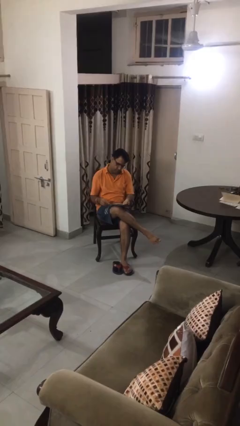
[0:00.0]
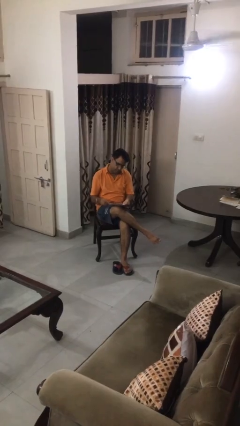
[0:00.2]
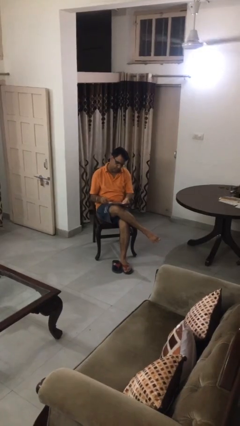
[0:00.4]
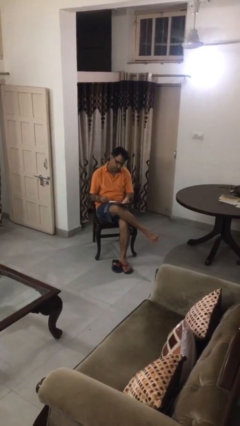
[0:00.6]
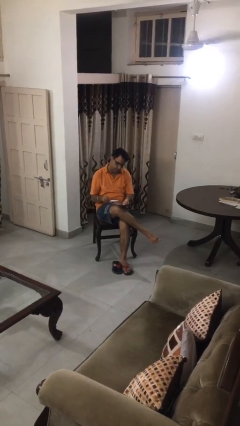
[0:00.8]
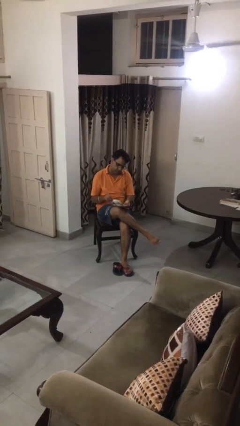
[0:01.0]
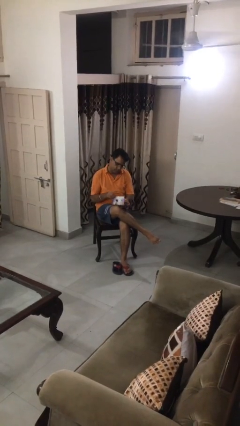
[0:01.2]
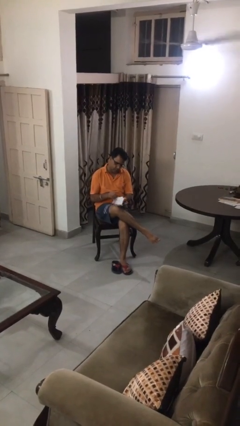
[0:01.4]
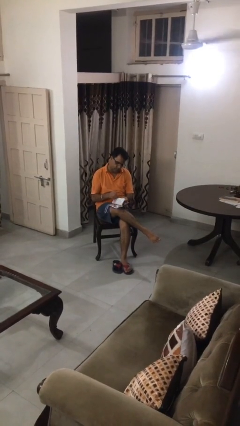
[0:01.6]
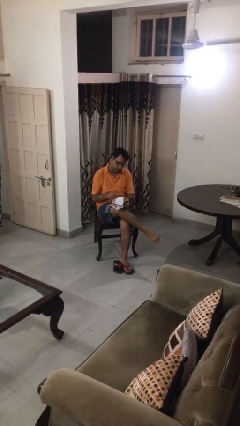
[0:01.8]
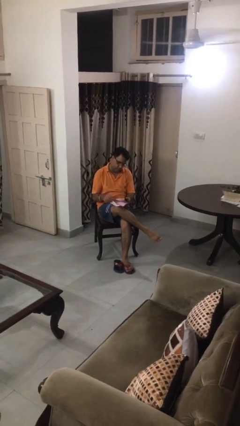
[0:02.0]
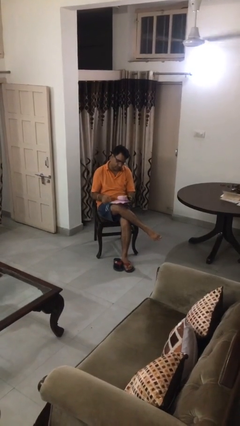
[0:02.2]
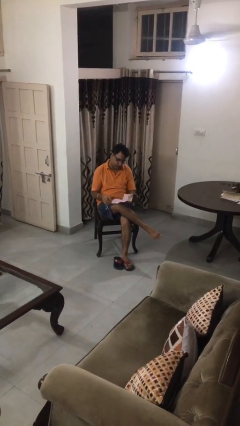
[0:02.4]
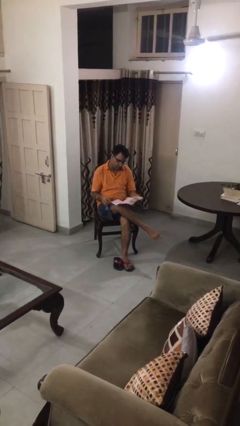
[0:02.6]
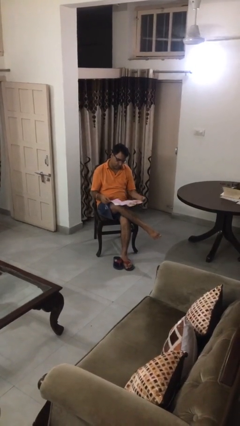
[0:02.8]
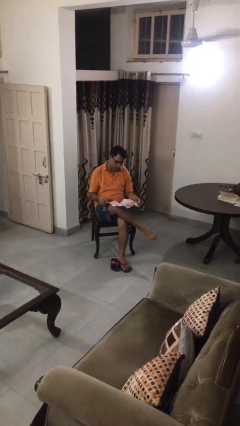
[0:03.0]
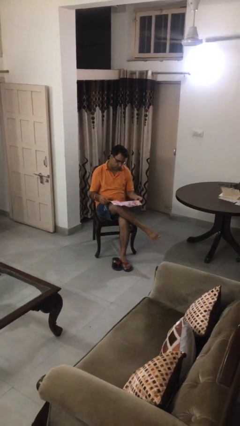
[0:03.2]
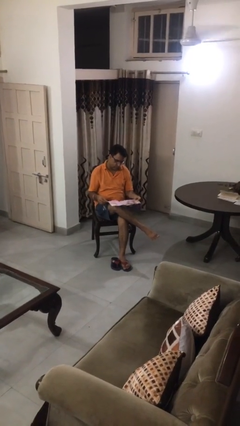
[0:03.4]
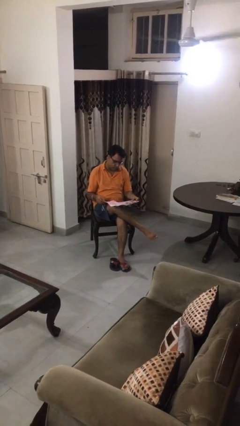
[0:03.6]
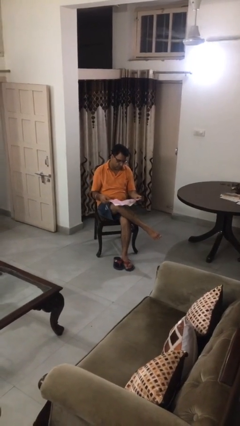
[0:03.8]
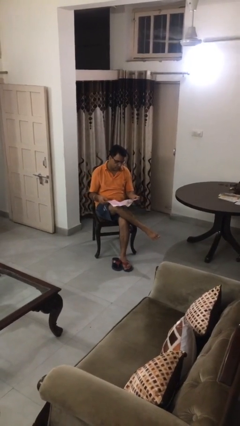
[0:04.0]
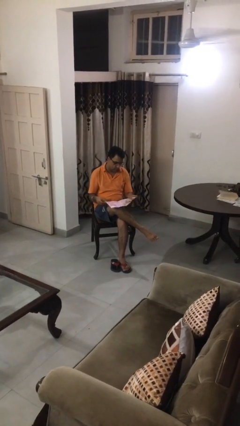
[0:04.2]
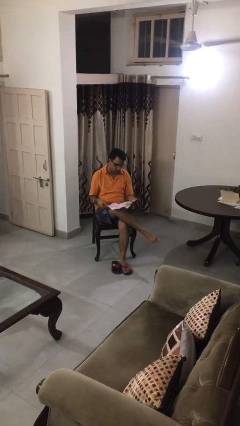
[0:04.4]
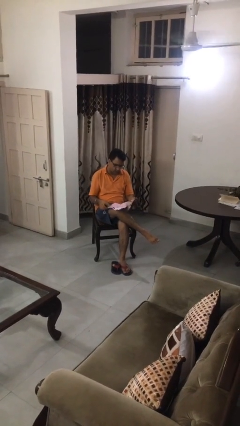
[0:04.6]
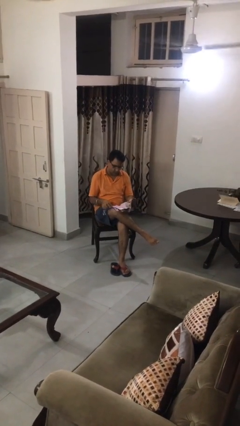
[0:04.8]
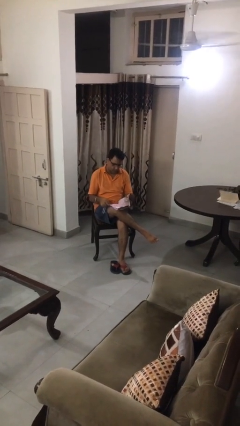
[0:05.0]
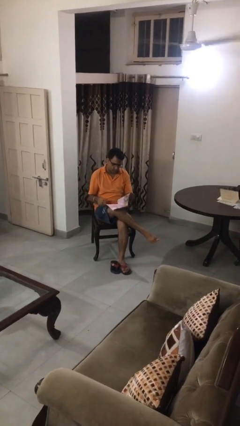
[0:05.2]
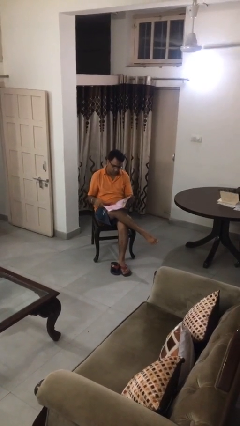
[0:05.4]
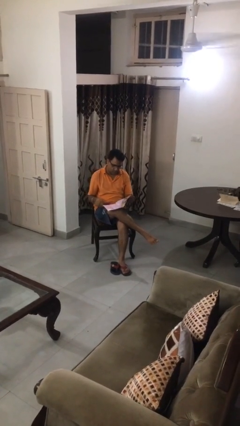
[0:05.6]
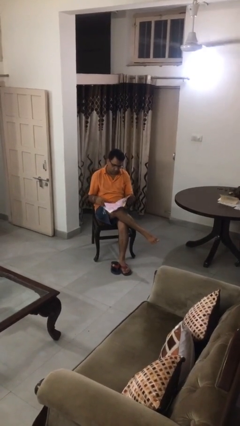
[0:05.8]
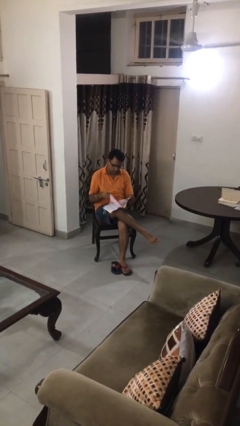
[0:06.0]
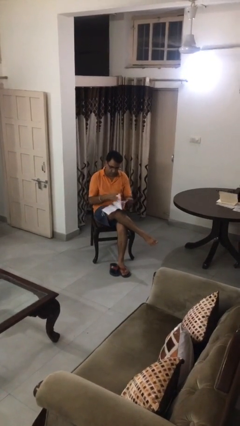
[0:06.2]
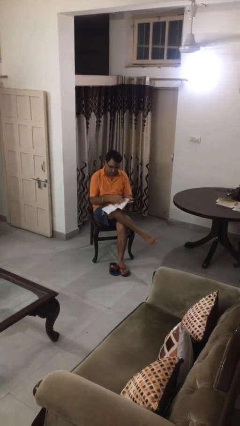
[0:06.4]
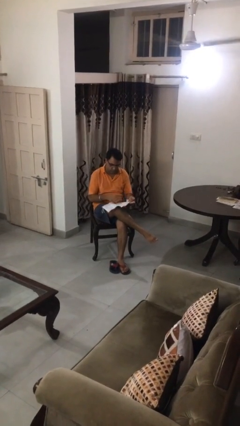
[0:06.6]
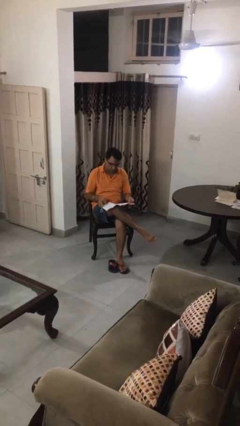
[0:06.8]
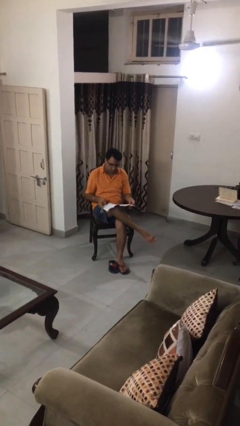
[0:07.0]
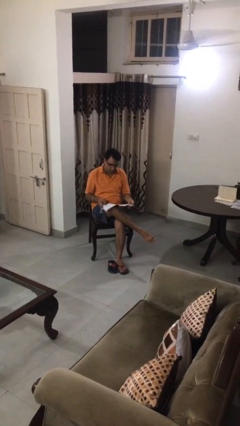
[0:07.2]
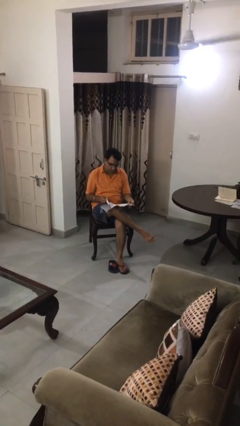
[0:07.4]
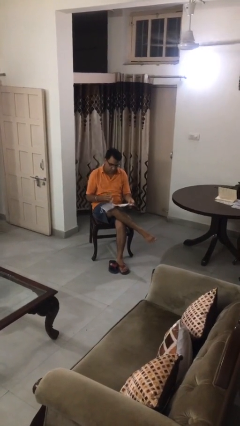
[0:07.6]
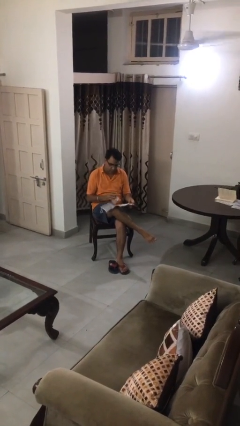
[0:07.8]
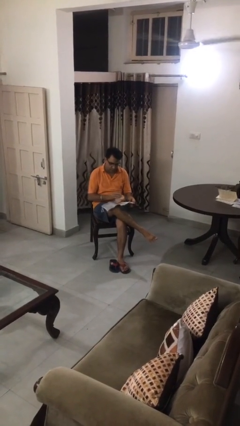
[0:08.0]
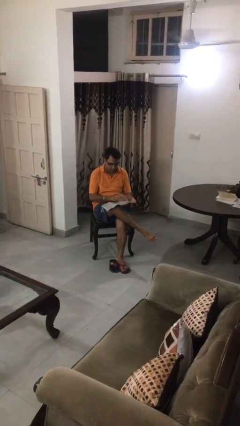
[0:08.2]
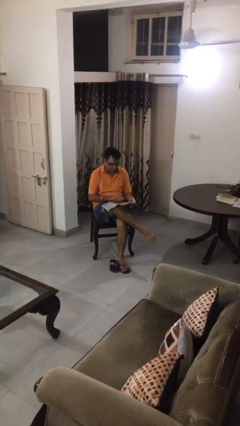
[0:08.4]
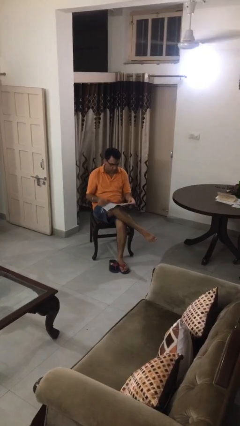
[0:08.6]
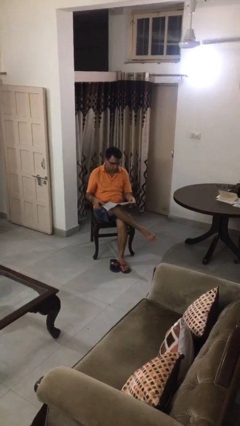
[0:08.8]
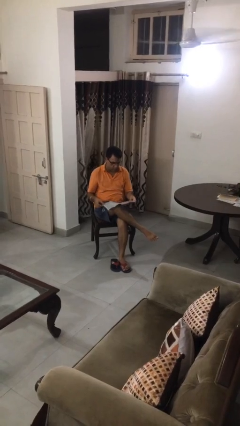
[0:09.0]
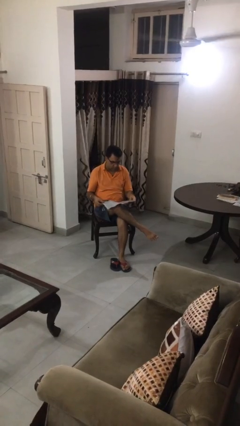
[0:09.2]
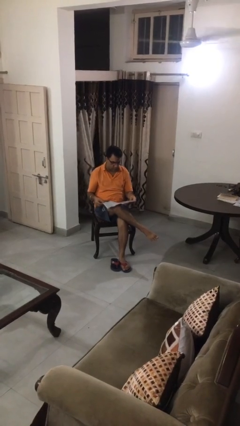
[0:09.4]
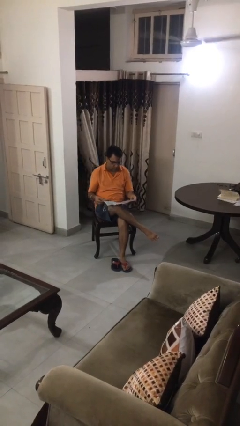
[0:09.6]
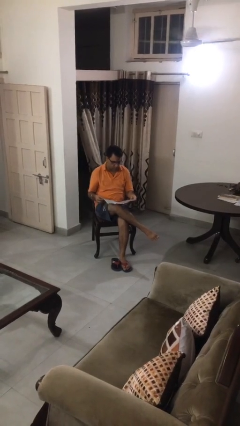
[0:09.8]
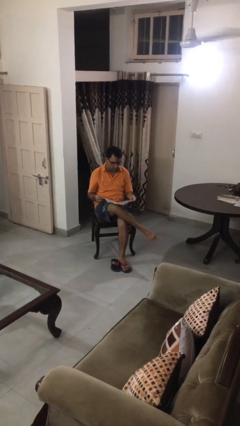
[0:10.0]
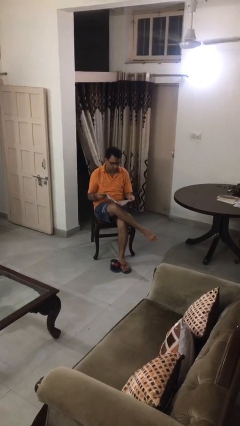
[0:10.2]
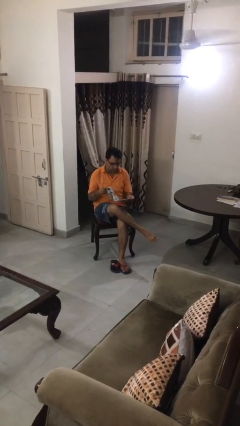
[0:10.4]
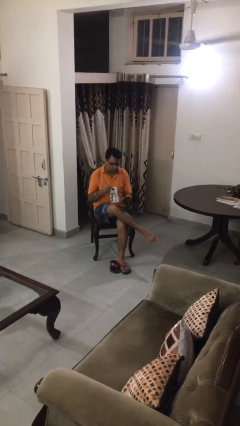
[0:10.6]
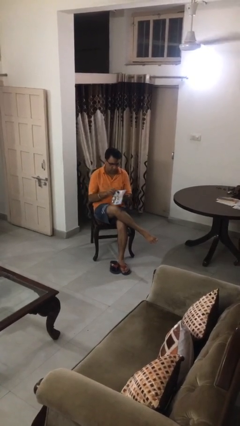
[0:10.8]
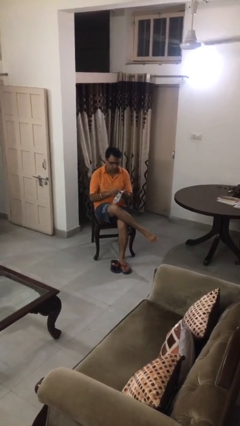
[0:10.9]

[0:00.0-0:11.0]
person reads magazine

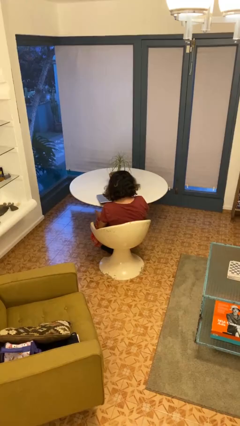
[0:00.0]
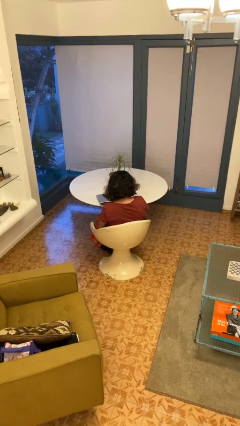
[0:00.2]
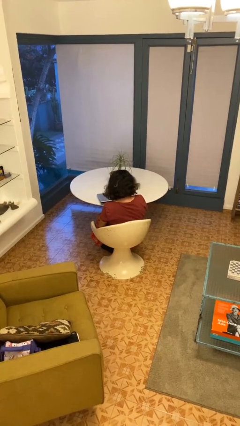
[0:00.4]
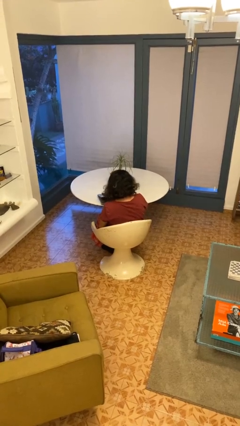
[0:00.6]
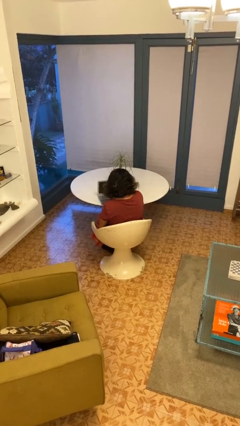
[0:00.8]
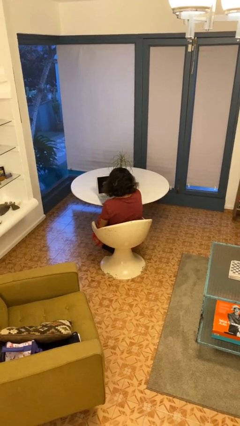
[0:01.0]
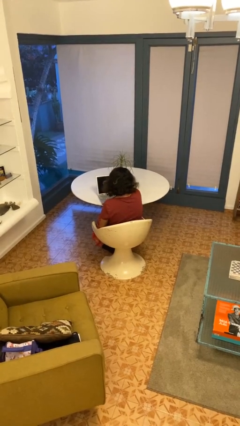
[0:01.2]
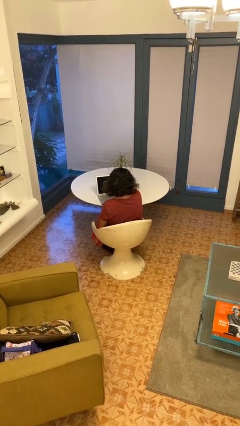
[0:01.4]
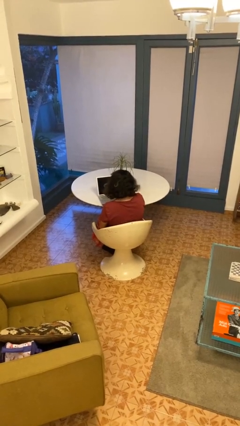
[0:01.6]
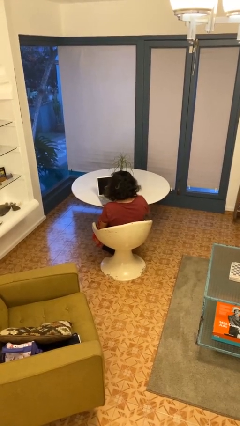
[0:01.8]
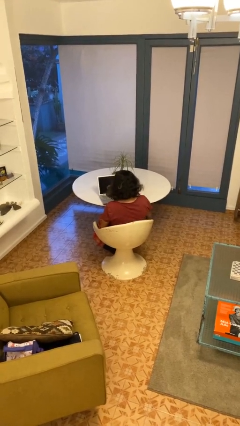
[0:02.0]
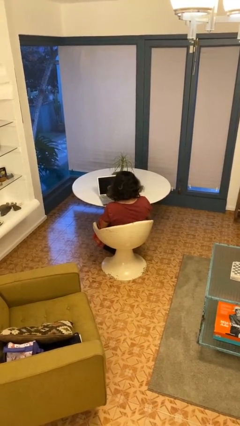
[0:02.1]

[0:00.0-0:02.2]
person opens laptop

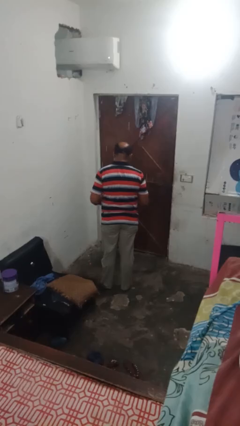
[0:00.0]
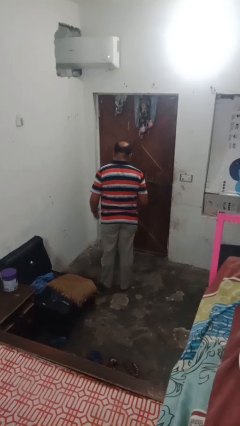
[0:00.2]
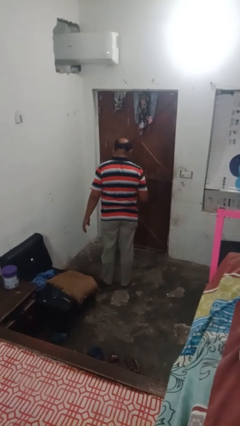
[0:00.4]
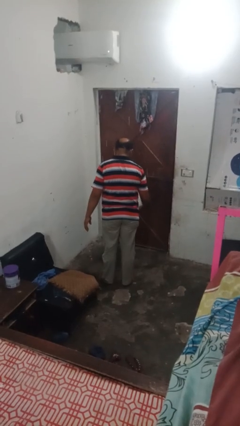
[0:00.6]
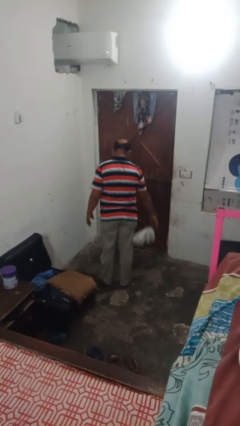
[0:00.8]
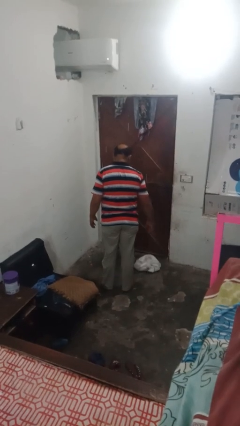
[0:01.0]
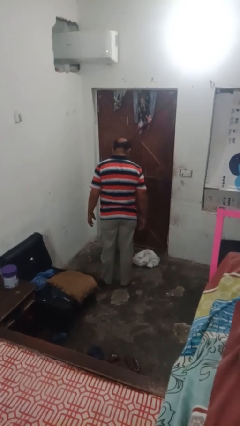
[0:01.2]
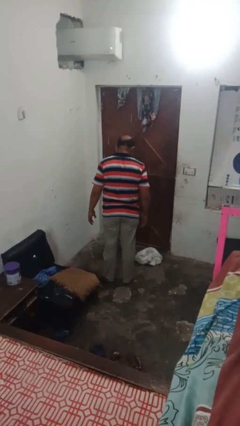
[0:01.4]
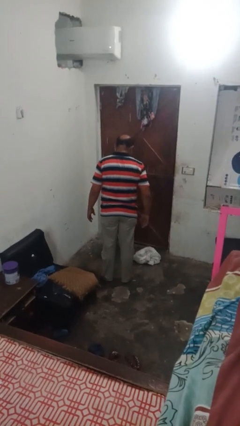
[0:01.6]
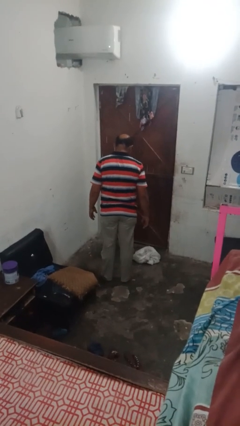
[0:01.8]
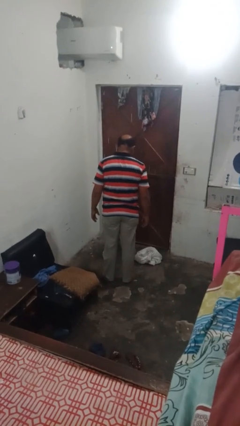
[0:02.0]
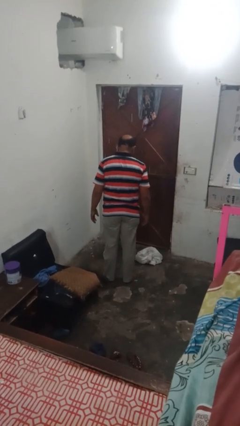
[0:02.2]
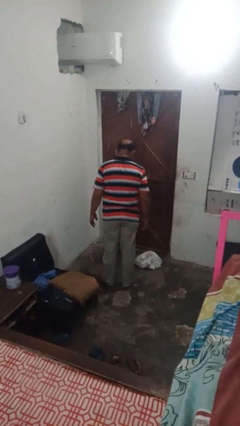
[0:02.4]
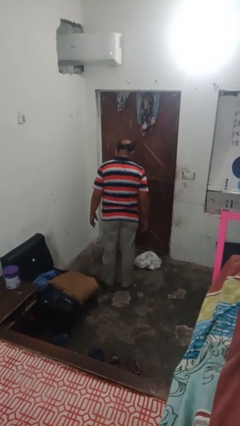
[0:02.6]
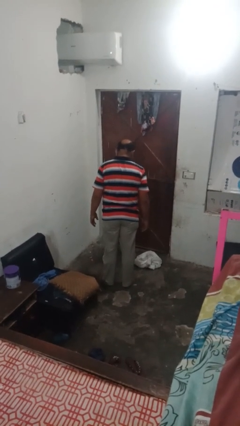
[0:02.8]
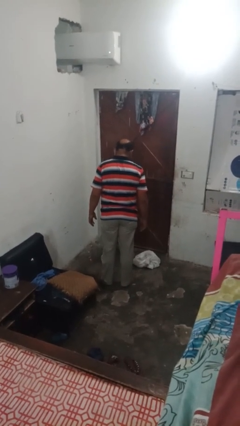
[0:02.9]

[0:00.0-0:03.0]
person throws object to ground

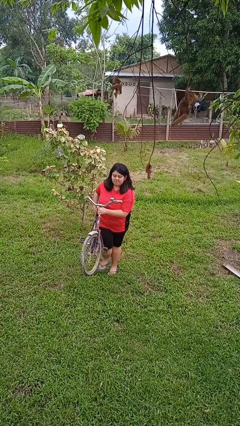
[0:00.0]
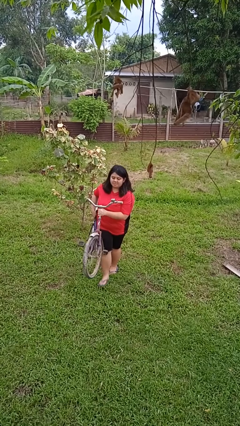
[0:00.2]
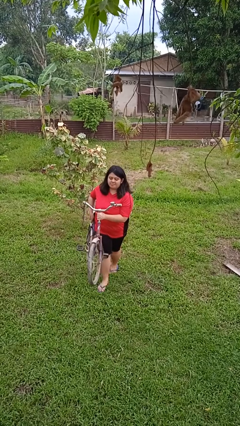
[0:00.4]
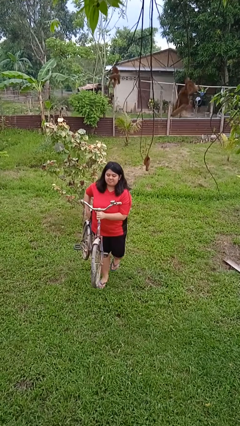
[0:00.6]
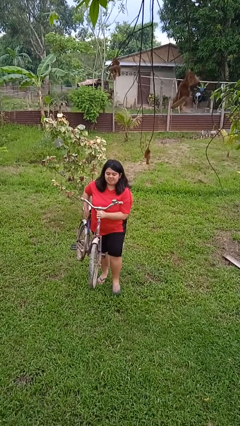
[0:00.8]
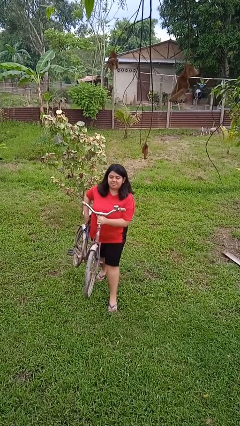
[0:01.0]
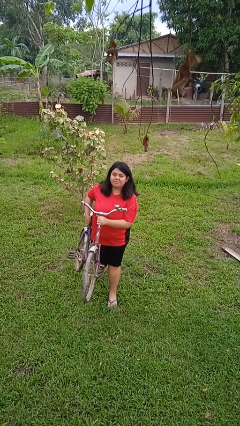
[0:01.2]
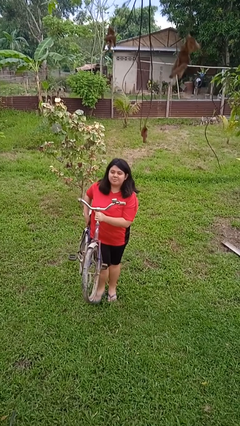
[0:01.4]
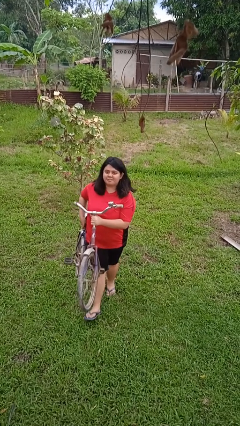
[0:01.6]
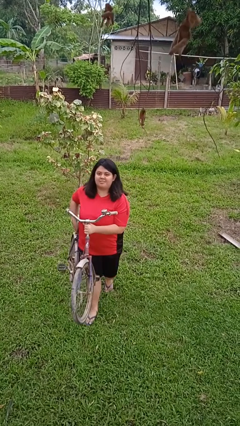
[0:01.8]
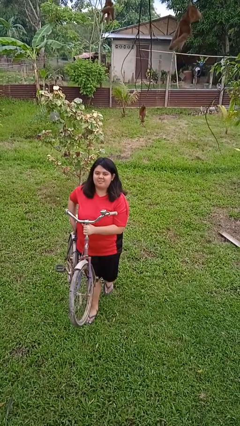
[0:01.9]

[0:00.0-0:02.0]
person carries bicycle
